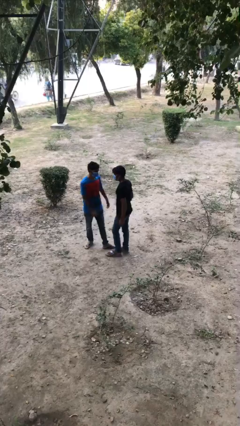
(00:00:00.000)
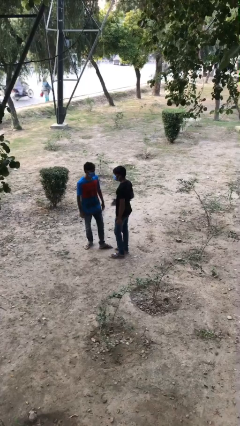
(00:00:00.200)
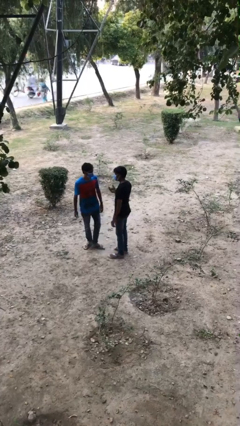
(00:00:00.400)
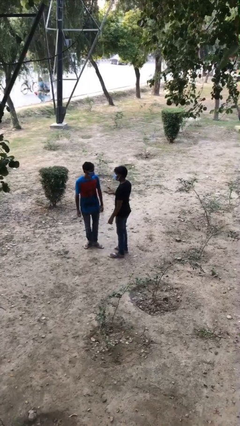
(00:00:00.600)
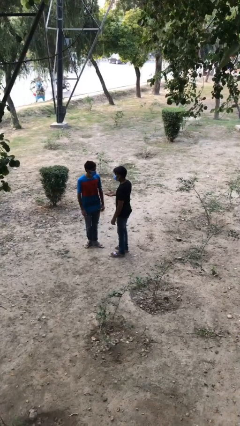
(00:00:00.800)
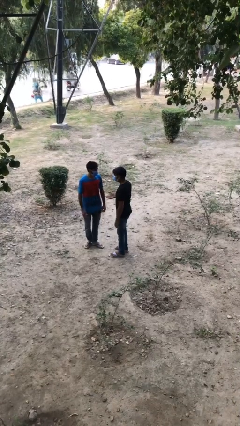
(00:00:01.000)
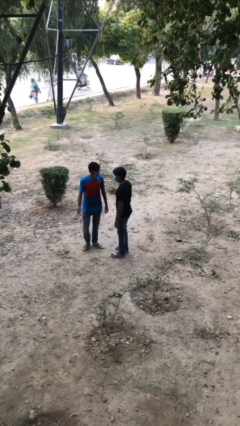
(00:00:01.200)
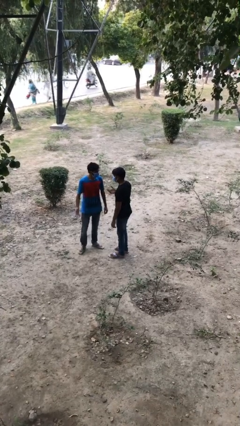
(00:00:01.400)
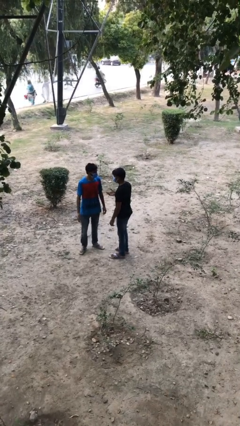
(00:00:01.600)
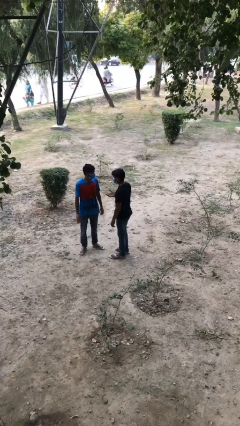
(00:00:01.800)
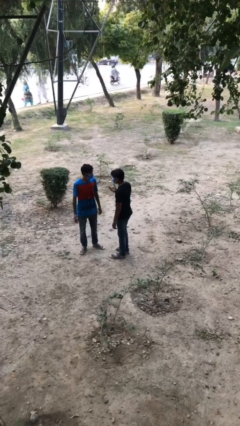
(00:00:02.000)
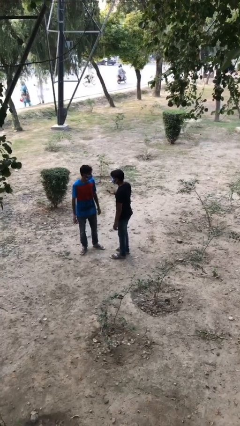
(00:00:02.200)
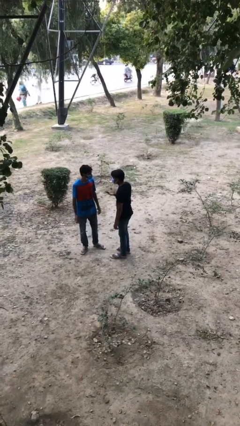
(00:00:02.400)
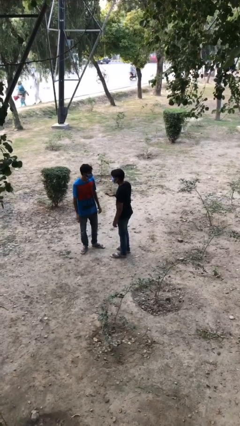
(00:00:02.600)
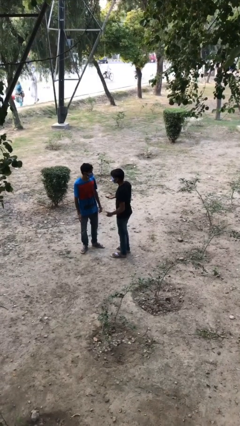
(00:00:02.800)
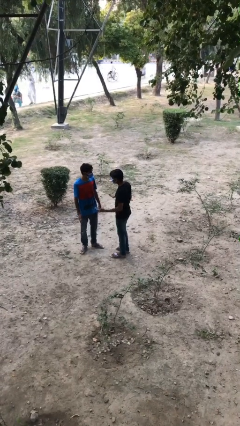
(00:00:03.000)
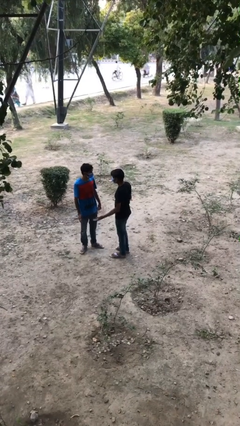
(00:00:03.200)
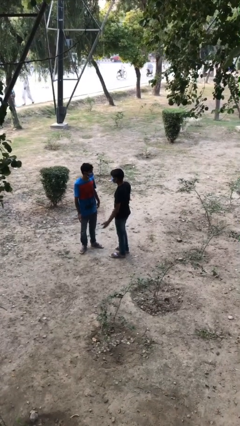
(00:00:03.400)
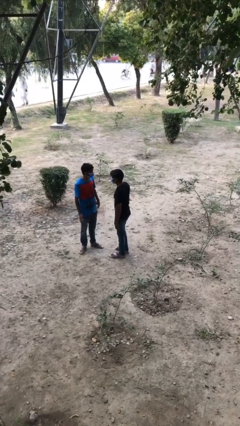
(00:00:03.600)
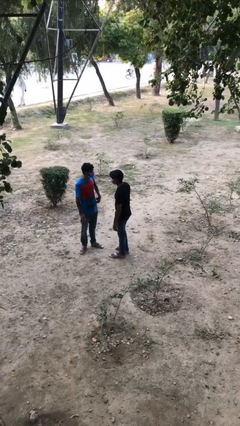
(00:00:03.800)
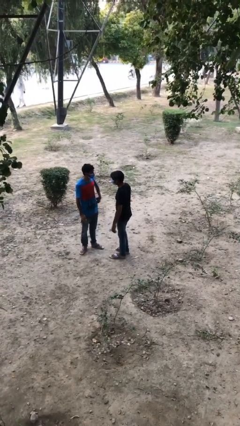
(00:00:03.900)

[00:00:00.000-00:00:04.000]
person talks to person

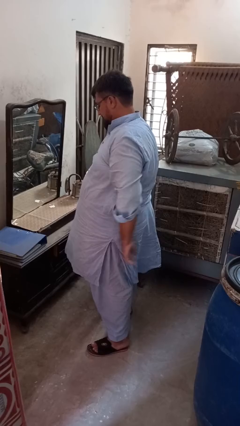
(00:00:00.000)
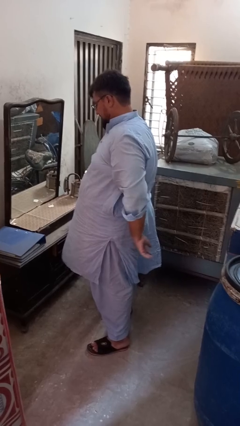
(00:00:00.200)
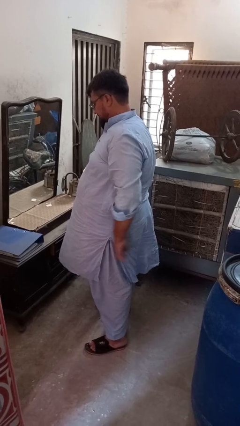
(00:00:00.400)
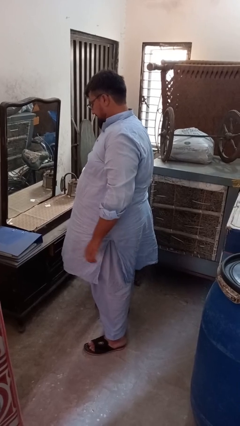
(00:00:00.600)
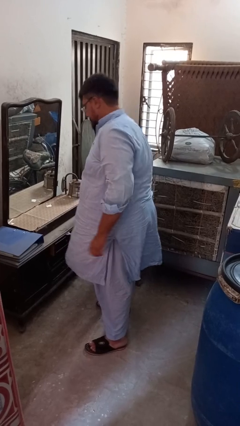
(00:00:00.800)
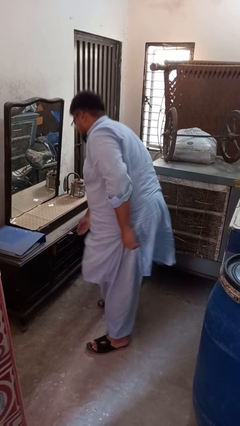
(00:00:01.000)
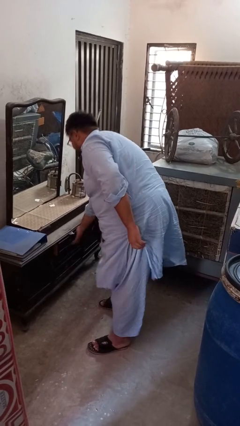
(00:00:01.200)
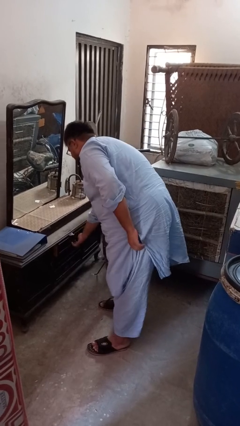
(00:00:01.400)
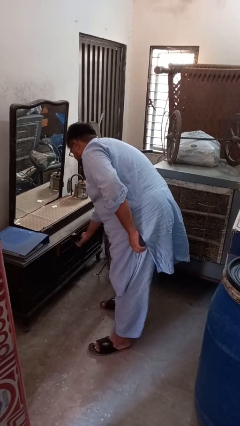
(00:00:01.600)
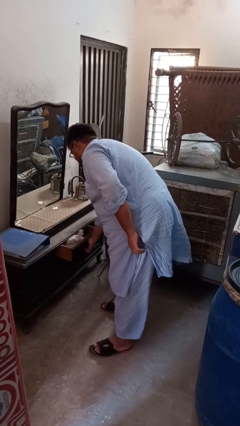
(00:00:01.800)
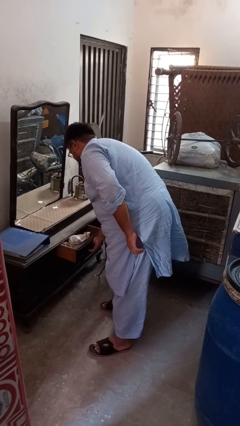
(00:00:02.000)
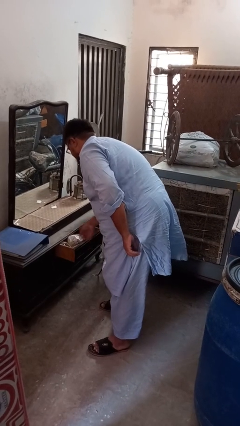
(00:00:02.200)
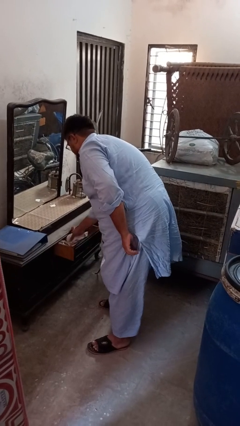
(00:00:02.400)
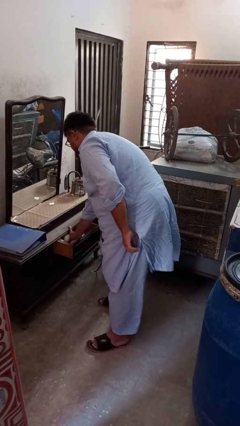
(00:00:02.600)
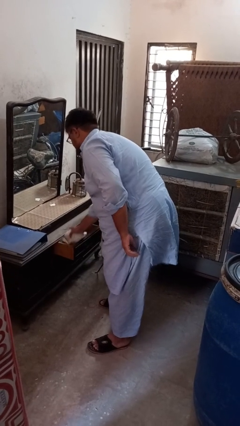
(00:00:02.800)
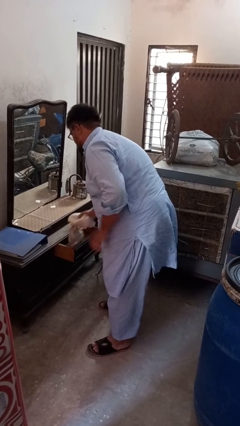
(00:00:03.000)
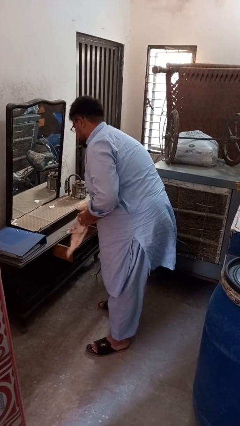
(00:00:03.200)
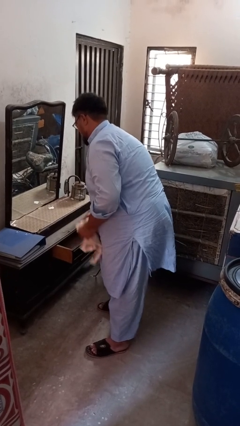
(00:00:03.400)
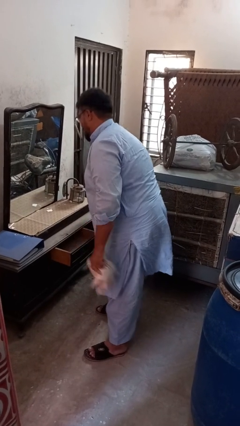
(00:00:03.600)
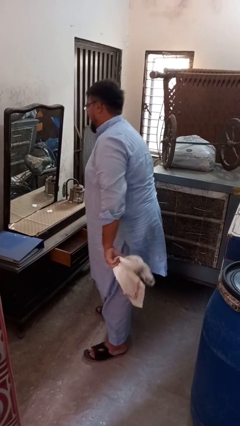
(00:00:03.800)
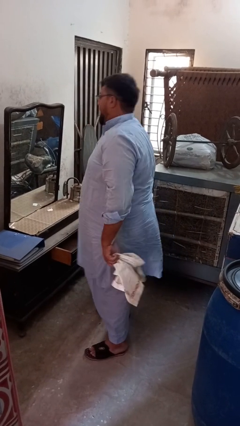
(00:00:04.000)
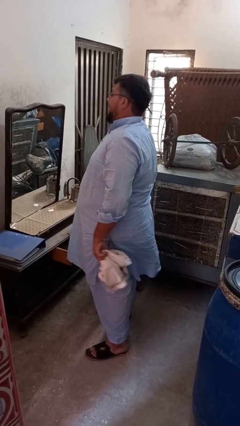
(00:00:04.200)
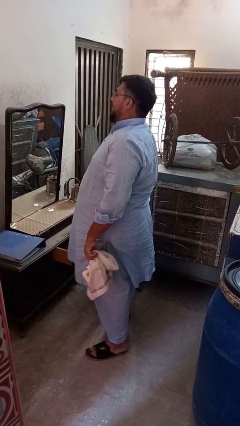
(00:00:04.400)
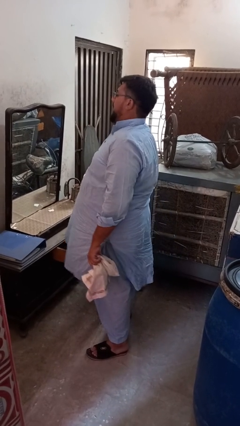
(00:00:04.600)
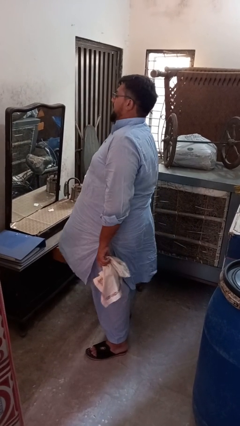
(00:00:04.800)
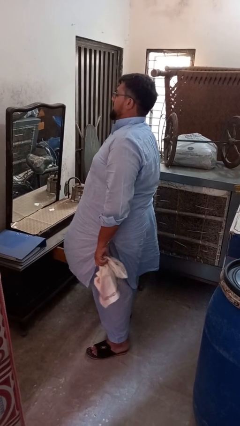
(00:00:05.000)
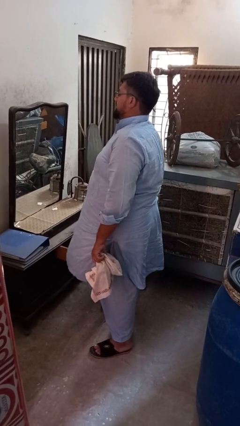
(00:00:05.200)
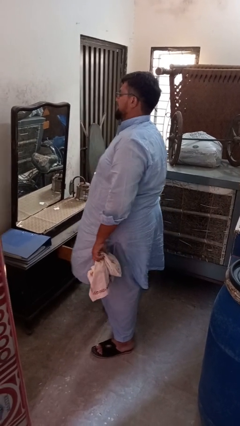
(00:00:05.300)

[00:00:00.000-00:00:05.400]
person takes clothes from dresser

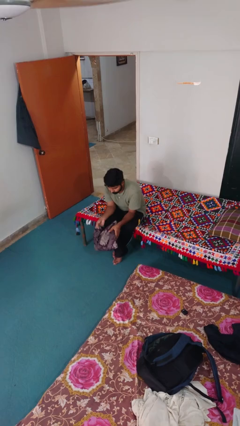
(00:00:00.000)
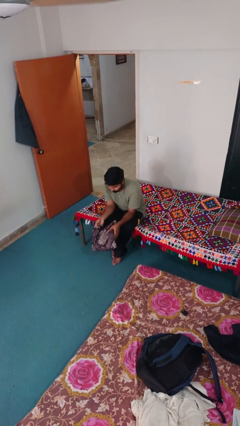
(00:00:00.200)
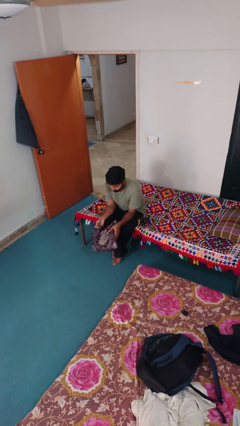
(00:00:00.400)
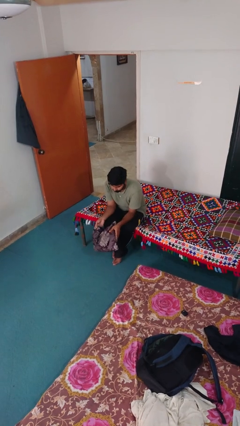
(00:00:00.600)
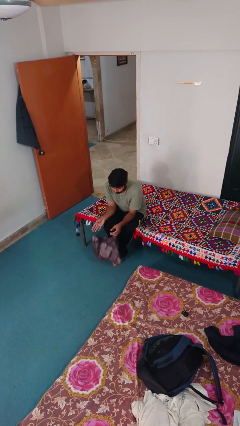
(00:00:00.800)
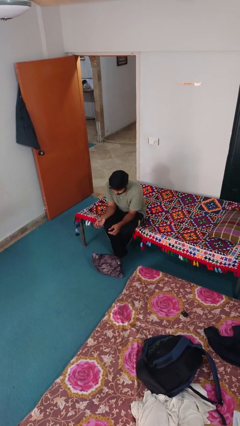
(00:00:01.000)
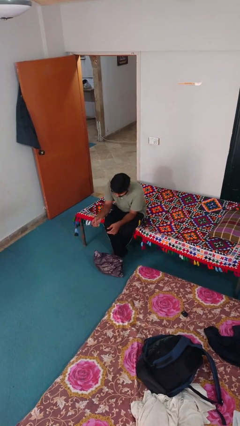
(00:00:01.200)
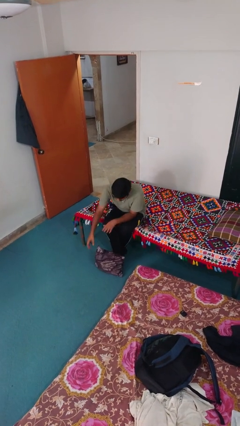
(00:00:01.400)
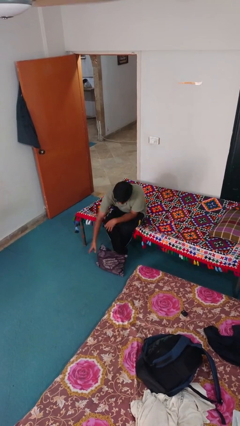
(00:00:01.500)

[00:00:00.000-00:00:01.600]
person drops object

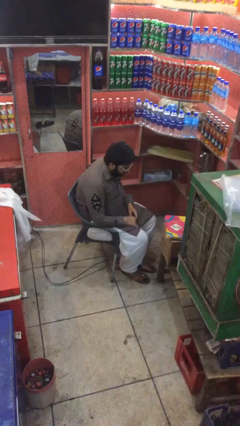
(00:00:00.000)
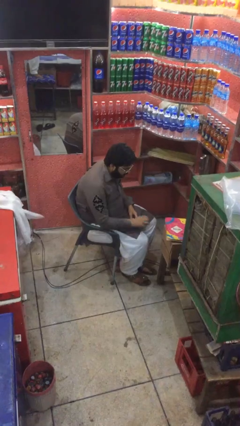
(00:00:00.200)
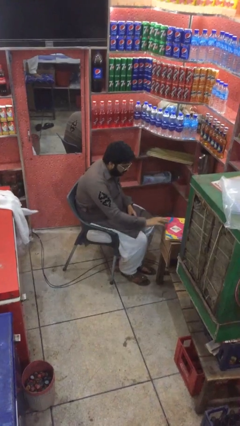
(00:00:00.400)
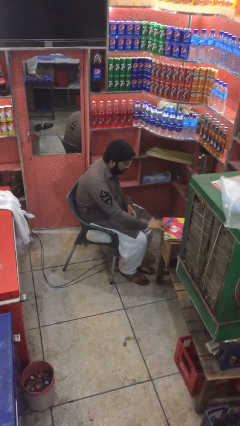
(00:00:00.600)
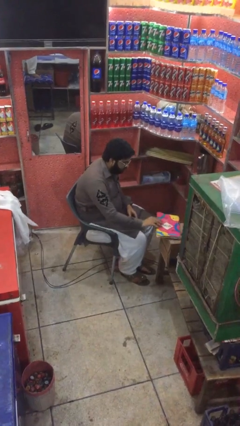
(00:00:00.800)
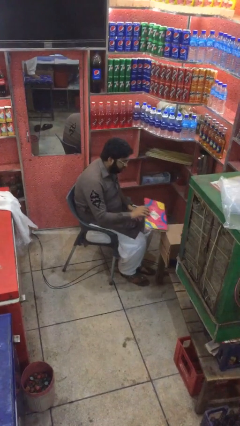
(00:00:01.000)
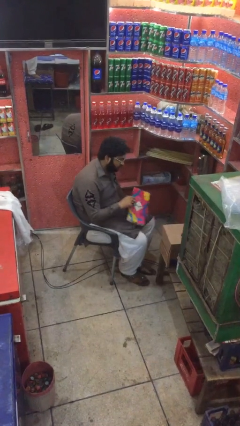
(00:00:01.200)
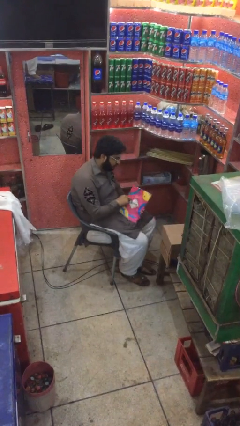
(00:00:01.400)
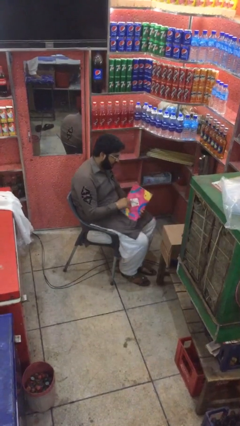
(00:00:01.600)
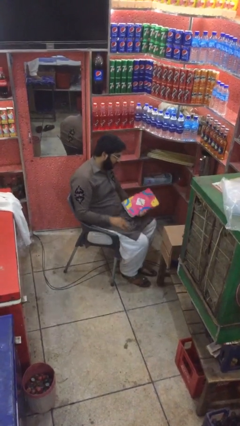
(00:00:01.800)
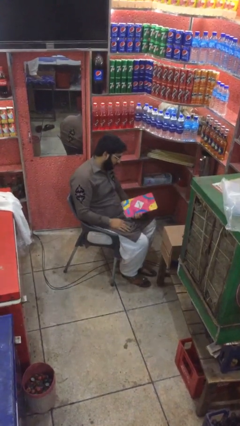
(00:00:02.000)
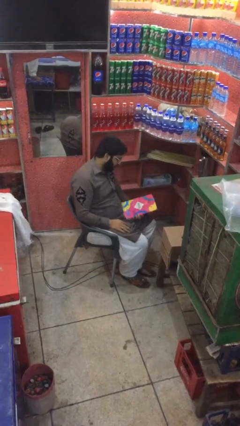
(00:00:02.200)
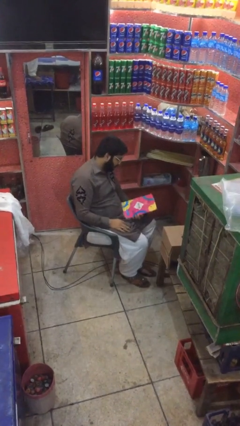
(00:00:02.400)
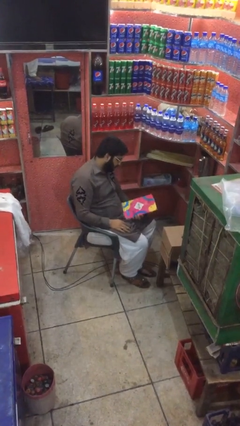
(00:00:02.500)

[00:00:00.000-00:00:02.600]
person picks up object from table

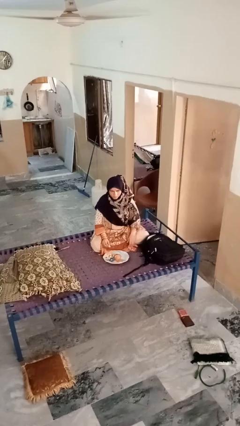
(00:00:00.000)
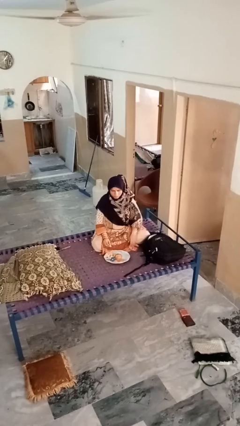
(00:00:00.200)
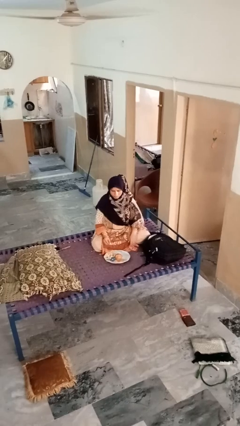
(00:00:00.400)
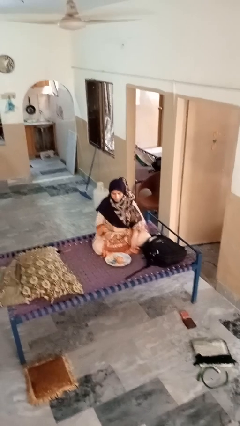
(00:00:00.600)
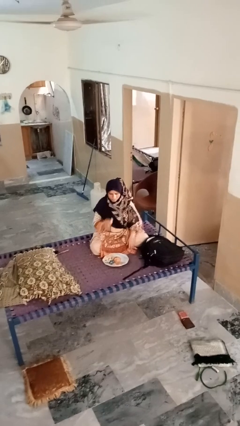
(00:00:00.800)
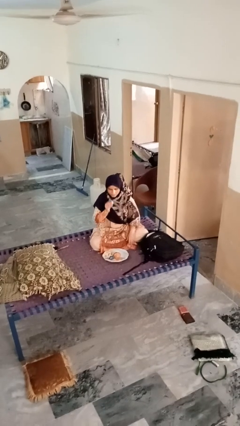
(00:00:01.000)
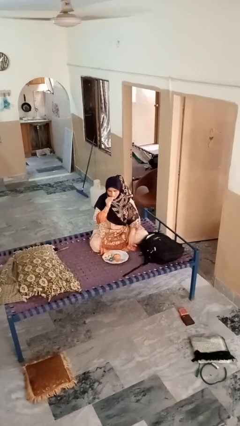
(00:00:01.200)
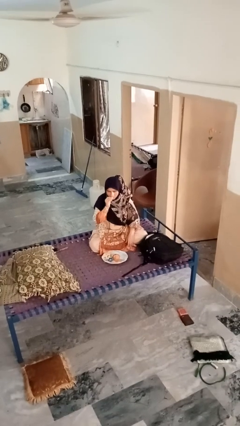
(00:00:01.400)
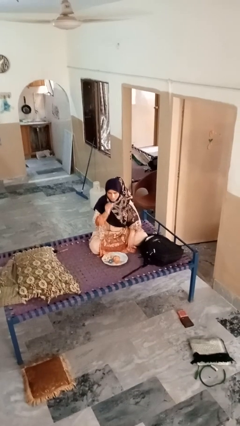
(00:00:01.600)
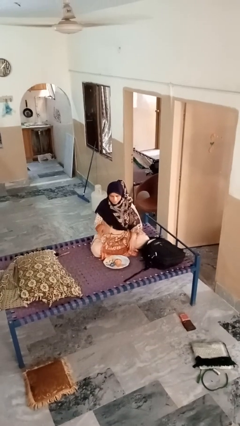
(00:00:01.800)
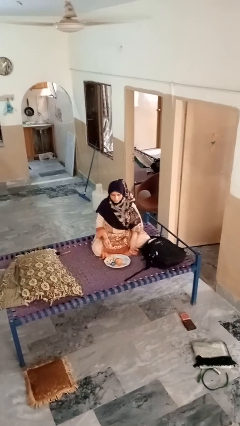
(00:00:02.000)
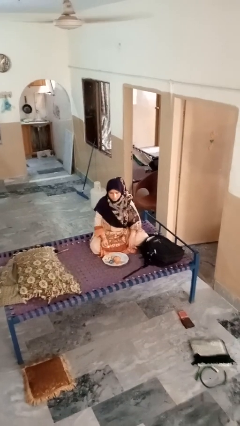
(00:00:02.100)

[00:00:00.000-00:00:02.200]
person eats apple

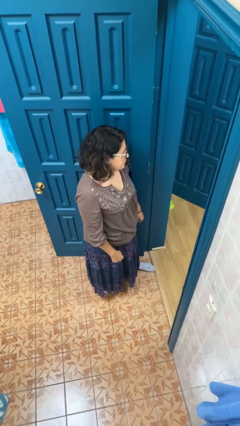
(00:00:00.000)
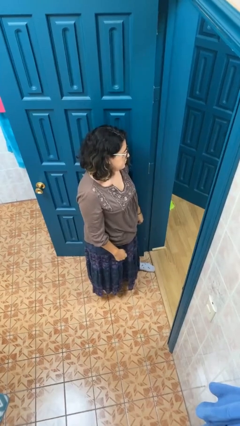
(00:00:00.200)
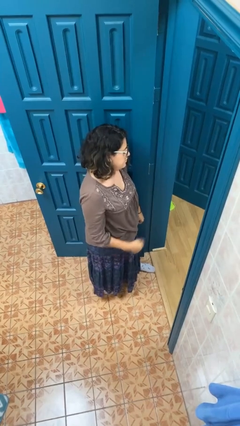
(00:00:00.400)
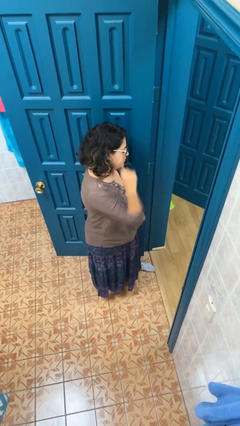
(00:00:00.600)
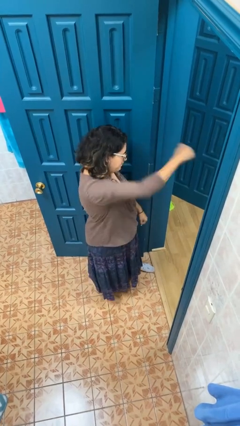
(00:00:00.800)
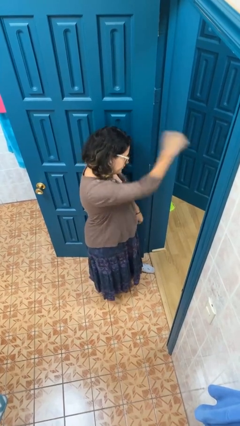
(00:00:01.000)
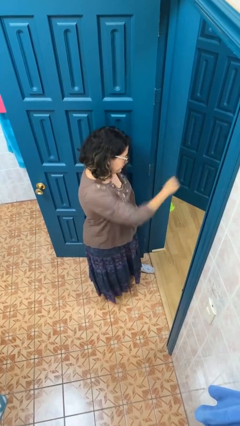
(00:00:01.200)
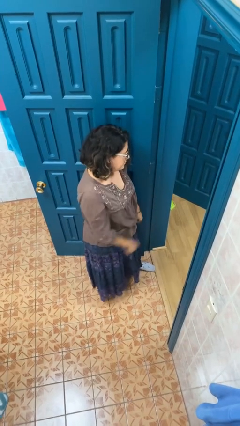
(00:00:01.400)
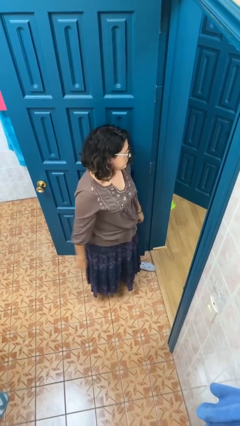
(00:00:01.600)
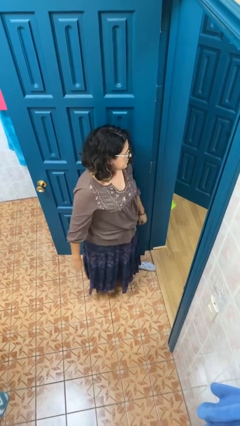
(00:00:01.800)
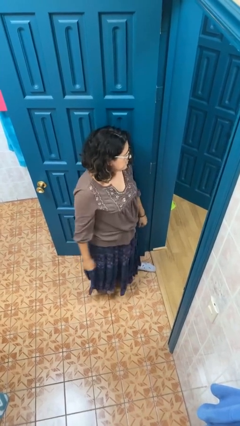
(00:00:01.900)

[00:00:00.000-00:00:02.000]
person punches
